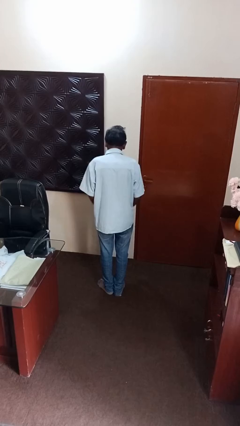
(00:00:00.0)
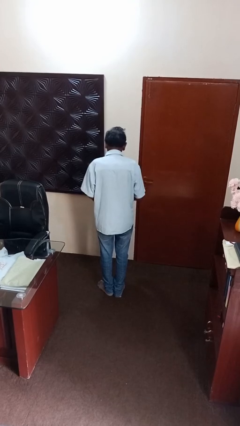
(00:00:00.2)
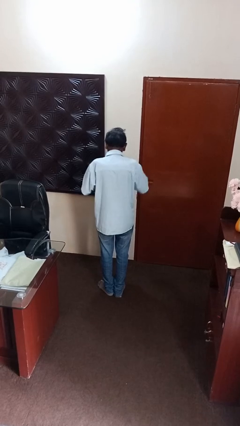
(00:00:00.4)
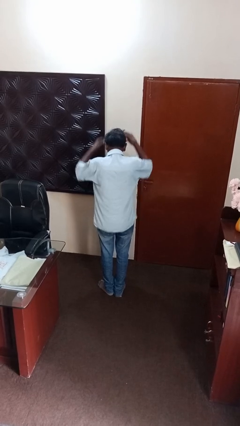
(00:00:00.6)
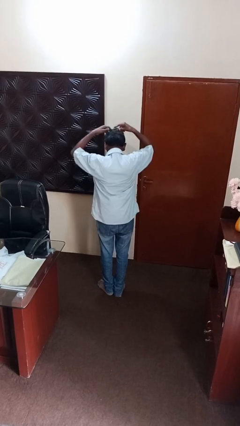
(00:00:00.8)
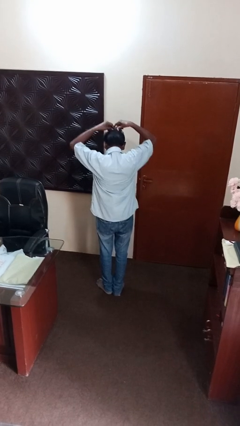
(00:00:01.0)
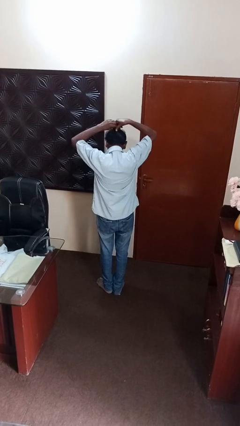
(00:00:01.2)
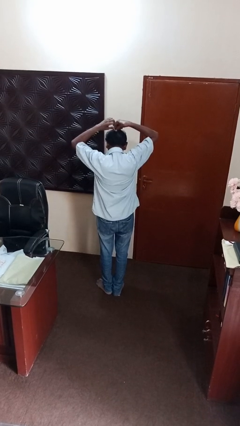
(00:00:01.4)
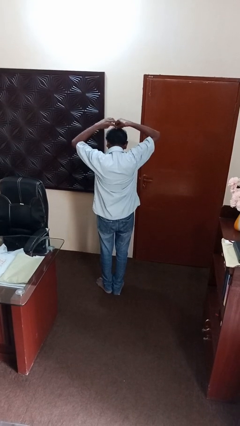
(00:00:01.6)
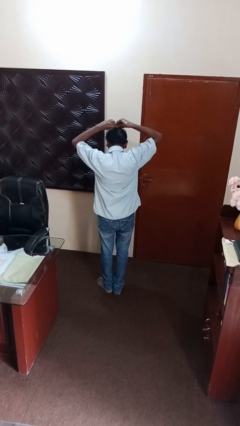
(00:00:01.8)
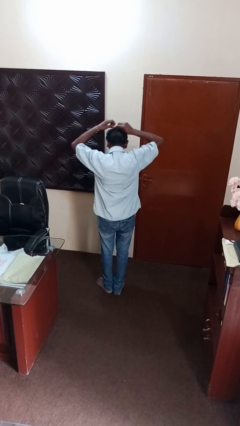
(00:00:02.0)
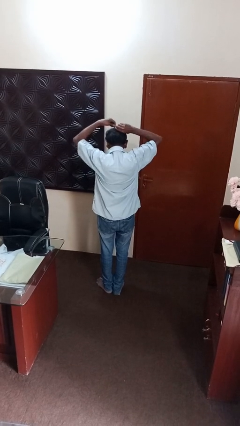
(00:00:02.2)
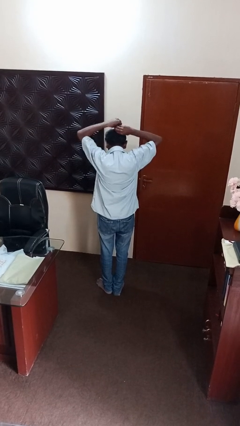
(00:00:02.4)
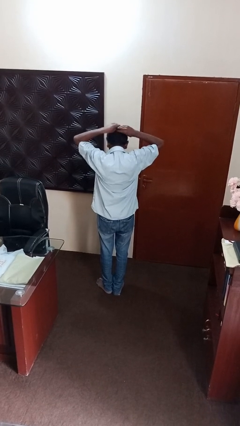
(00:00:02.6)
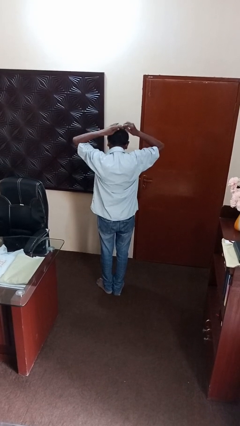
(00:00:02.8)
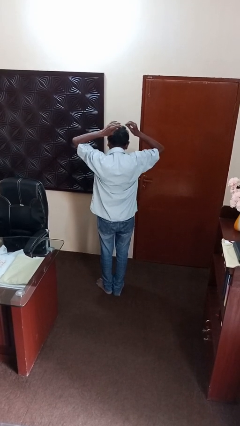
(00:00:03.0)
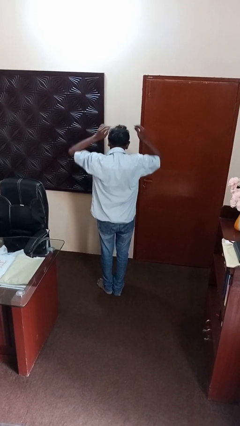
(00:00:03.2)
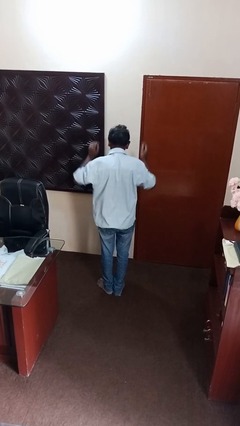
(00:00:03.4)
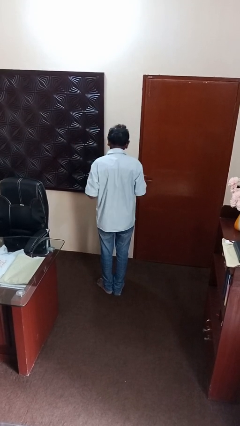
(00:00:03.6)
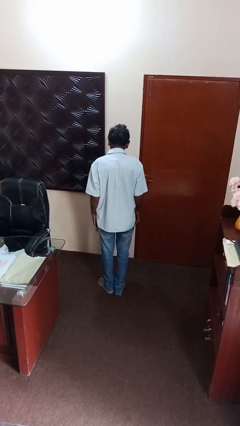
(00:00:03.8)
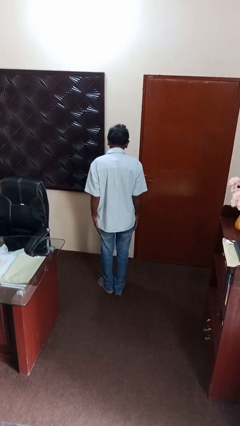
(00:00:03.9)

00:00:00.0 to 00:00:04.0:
person puts hair in ponytail

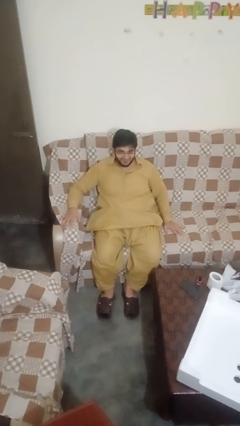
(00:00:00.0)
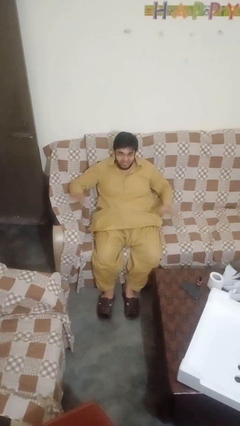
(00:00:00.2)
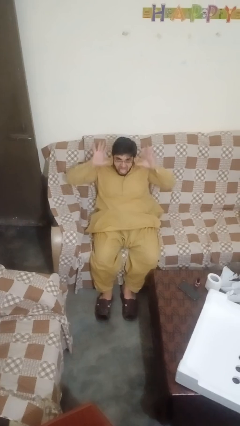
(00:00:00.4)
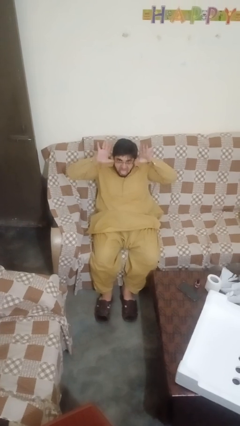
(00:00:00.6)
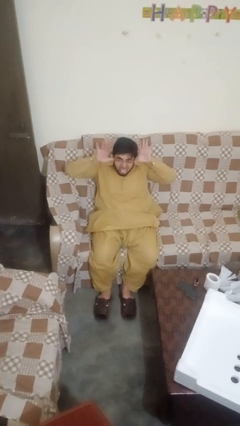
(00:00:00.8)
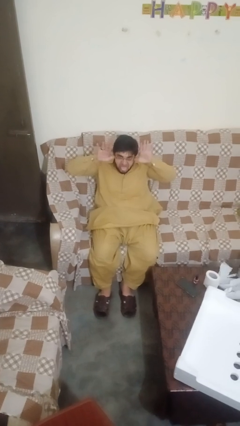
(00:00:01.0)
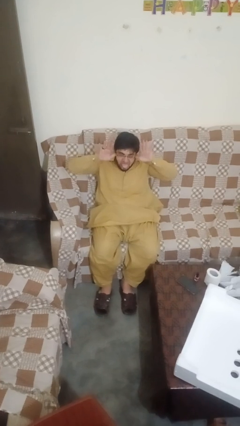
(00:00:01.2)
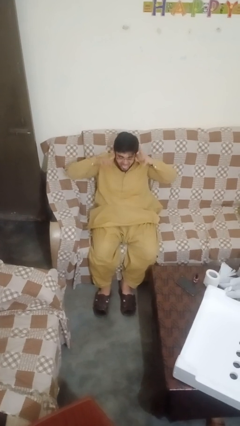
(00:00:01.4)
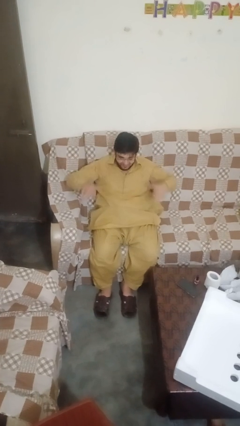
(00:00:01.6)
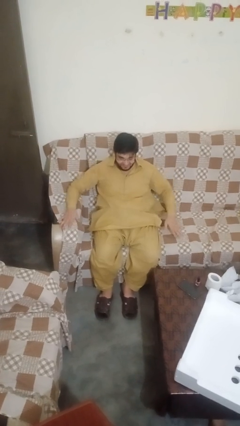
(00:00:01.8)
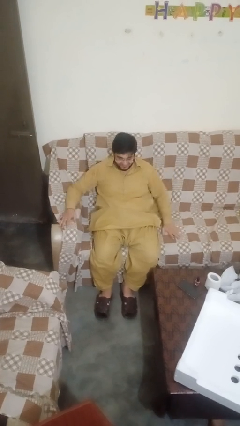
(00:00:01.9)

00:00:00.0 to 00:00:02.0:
person sticks out tongue

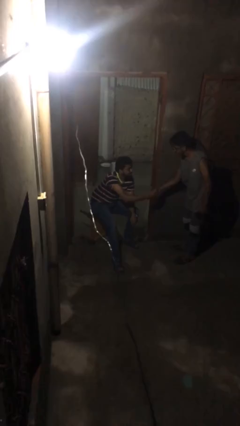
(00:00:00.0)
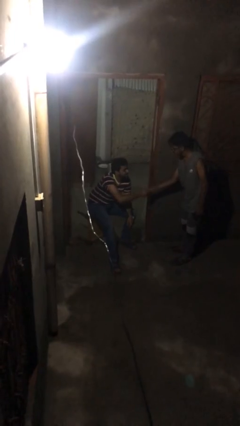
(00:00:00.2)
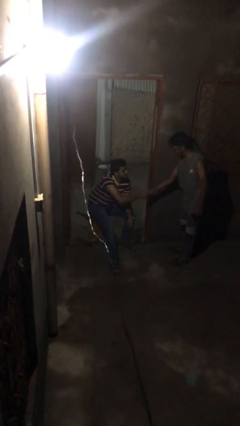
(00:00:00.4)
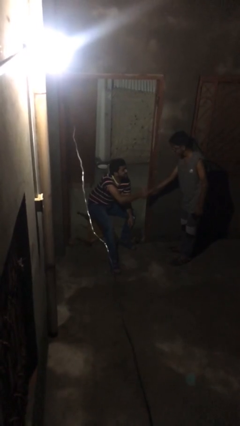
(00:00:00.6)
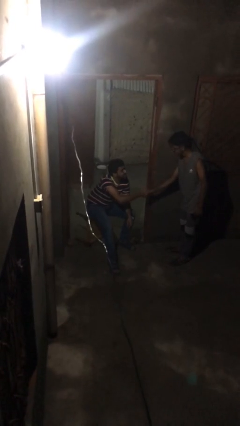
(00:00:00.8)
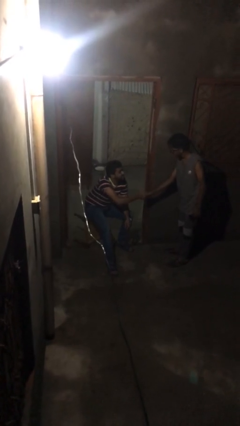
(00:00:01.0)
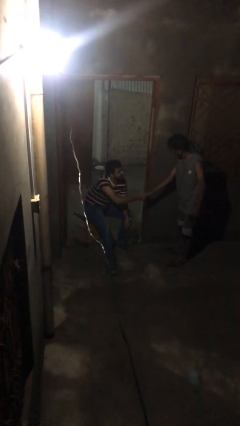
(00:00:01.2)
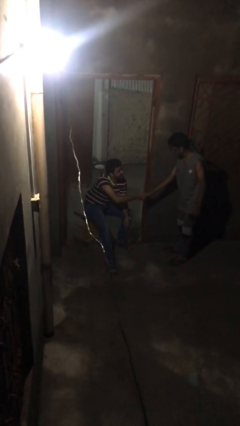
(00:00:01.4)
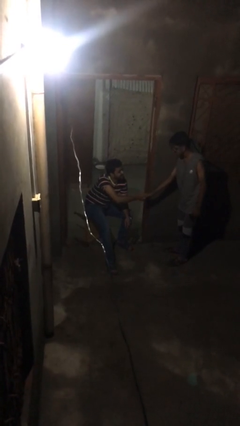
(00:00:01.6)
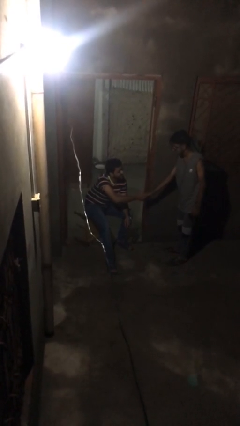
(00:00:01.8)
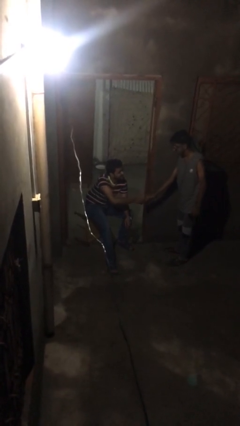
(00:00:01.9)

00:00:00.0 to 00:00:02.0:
person shakes hand

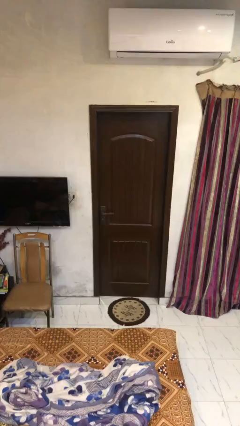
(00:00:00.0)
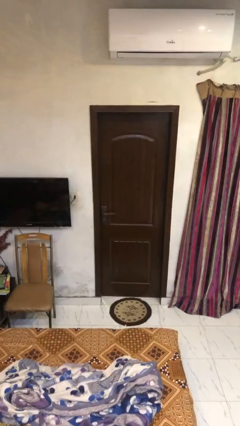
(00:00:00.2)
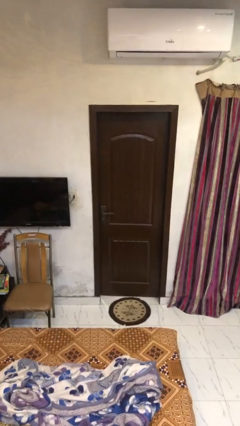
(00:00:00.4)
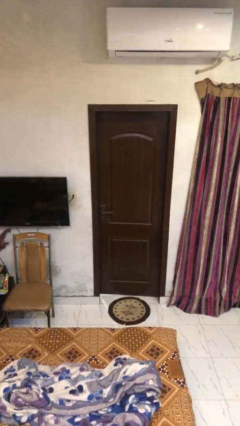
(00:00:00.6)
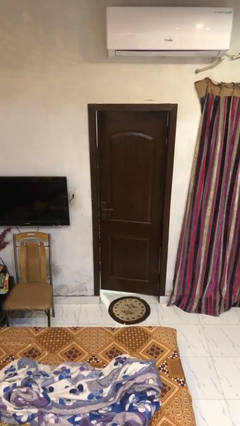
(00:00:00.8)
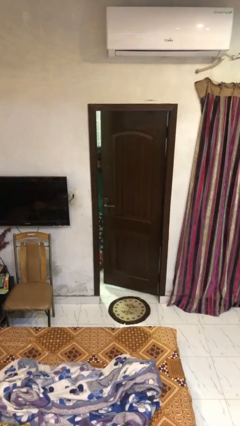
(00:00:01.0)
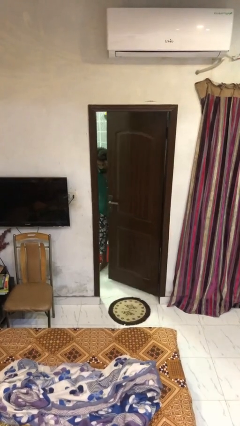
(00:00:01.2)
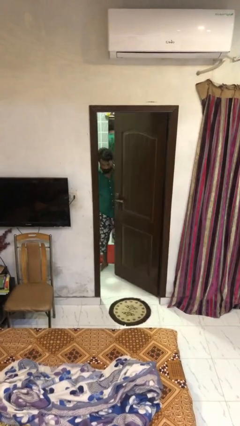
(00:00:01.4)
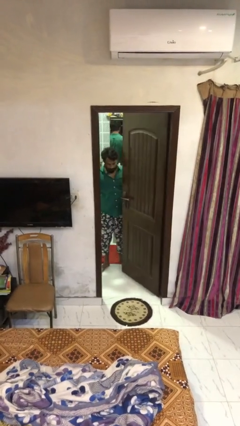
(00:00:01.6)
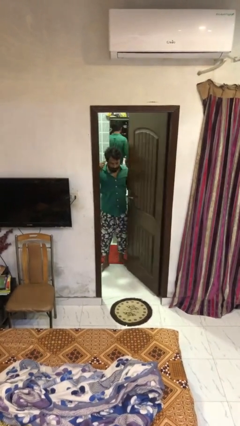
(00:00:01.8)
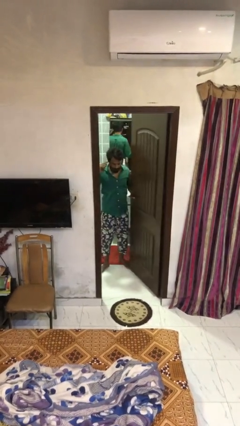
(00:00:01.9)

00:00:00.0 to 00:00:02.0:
person opens facility door

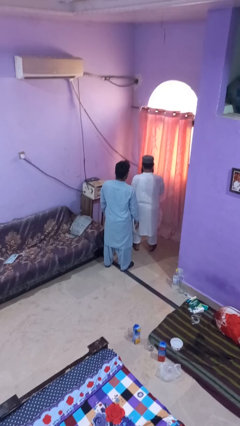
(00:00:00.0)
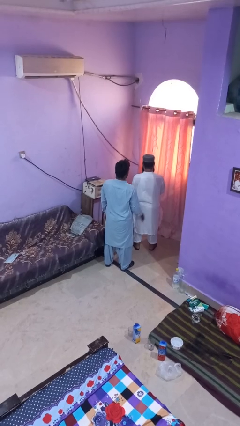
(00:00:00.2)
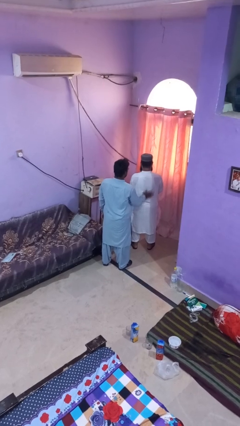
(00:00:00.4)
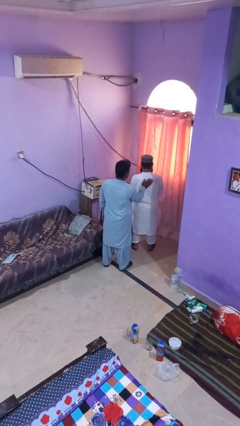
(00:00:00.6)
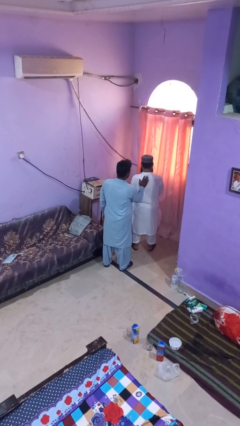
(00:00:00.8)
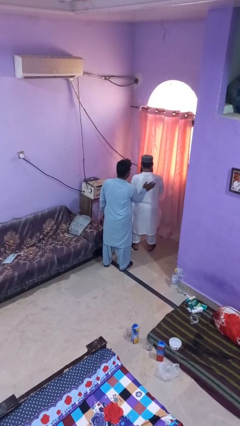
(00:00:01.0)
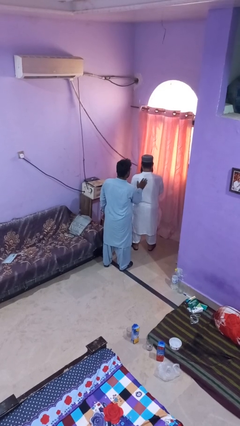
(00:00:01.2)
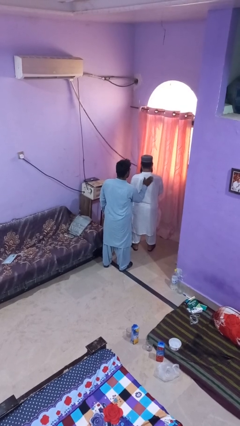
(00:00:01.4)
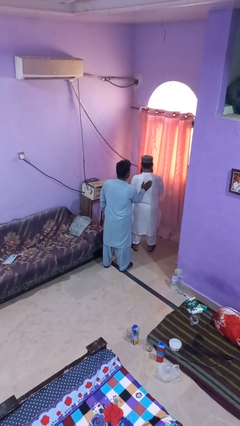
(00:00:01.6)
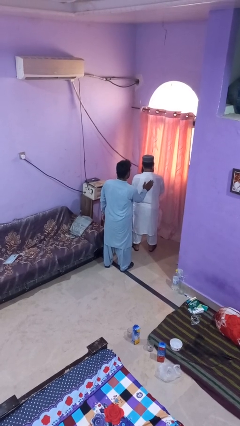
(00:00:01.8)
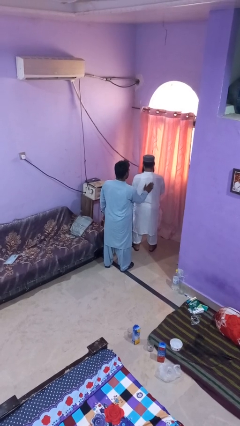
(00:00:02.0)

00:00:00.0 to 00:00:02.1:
person touches back of person

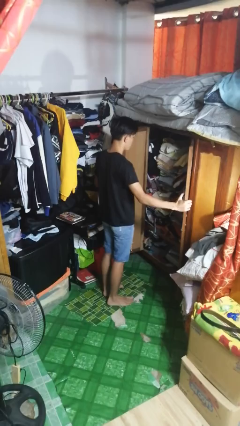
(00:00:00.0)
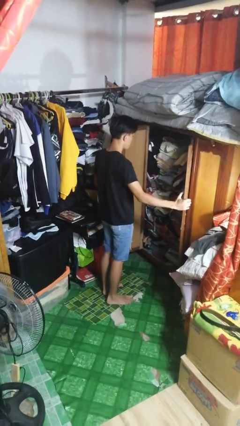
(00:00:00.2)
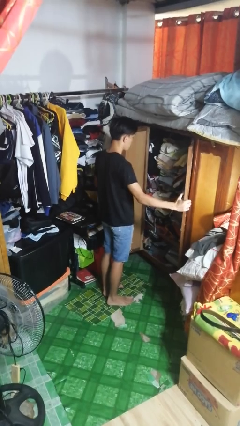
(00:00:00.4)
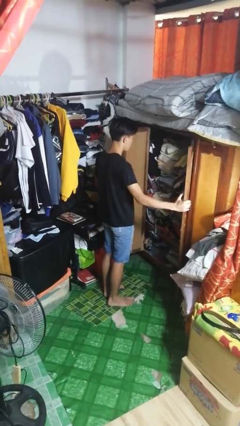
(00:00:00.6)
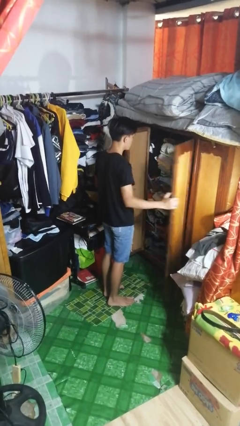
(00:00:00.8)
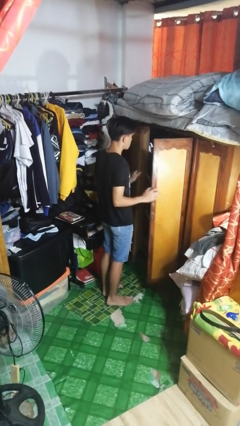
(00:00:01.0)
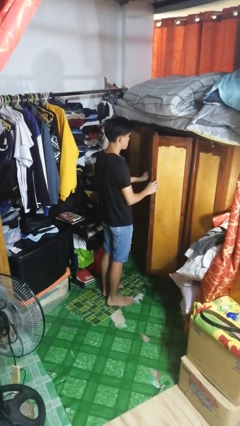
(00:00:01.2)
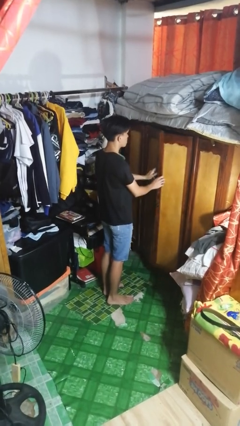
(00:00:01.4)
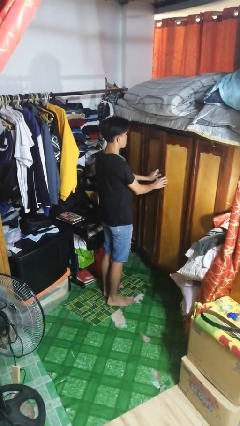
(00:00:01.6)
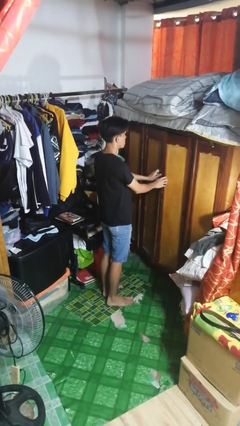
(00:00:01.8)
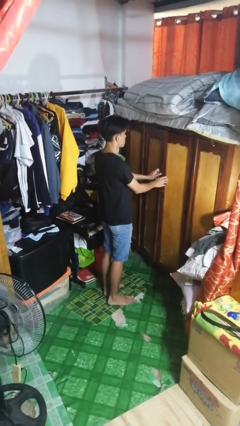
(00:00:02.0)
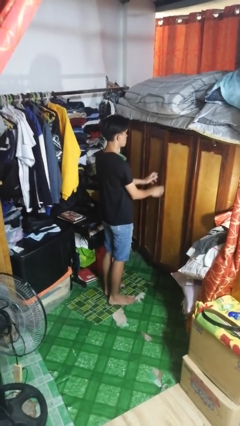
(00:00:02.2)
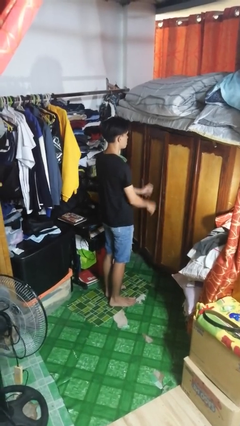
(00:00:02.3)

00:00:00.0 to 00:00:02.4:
person closes closet door

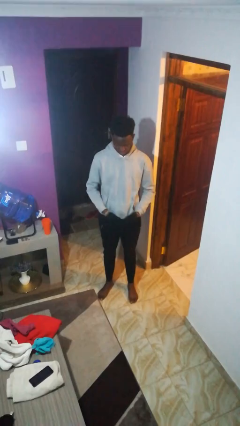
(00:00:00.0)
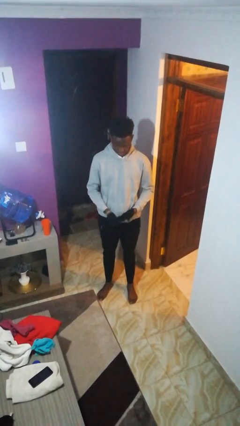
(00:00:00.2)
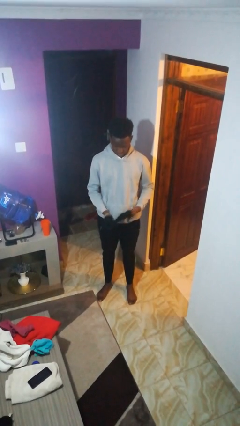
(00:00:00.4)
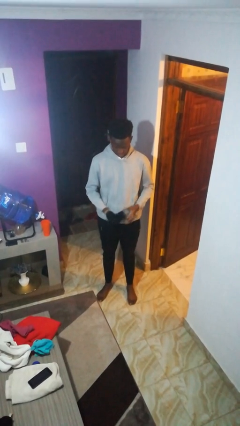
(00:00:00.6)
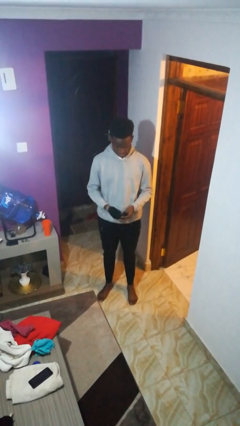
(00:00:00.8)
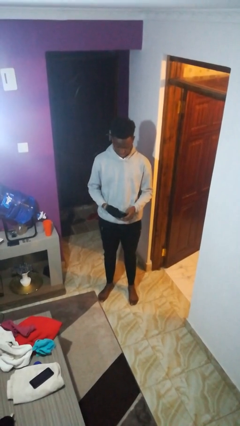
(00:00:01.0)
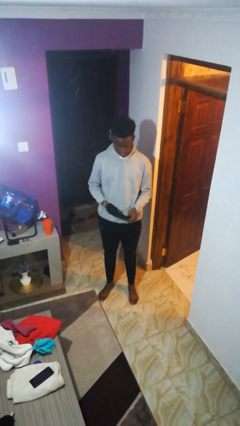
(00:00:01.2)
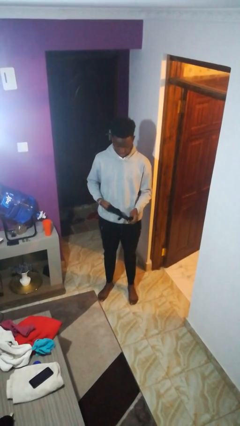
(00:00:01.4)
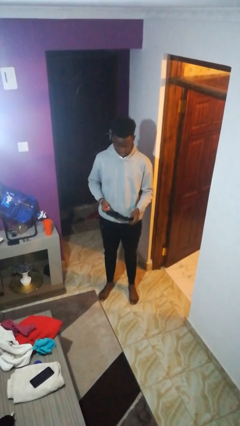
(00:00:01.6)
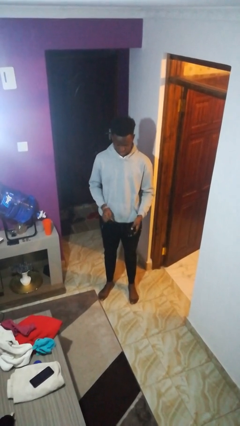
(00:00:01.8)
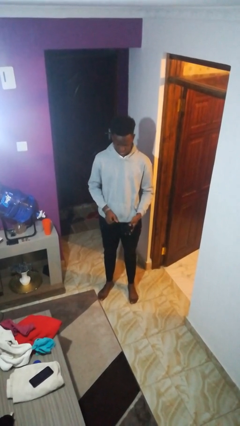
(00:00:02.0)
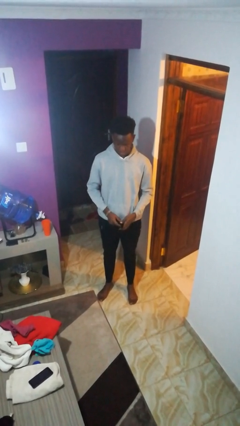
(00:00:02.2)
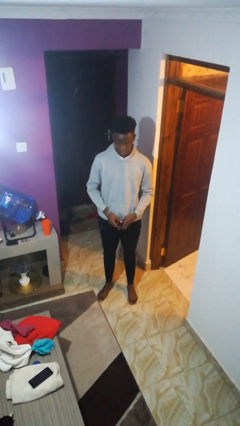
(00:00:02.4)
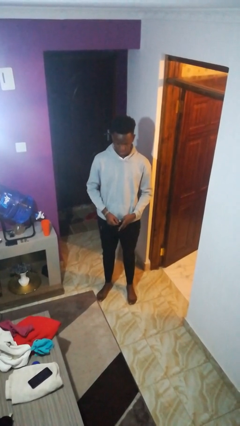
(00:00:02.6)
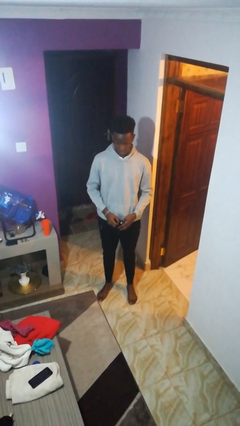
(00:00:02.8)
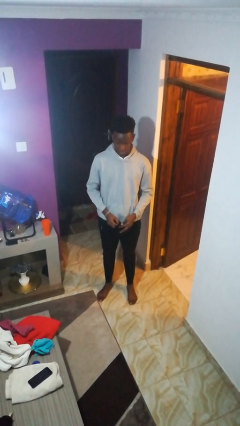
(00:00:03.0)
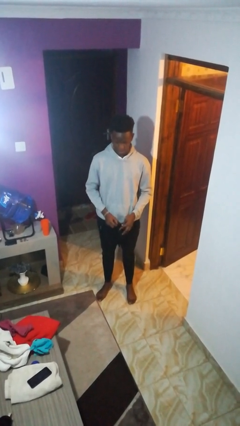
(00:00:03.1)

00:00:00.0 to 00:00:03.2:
person takes off gloves
